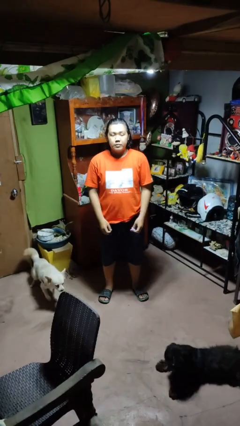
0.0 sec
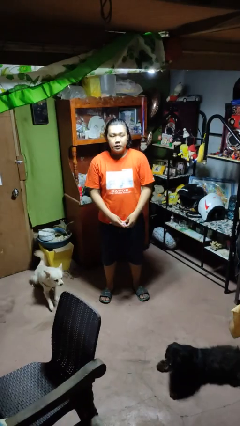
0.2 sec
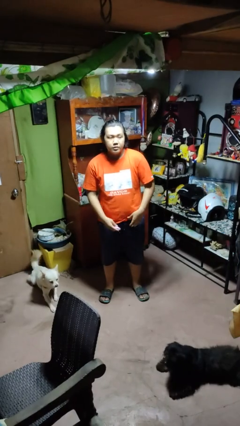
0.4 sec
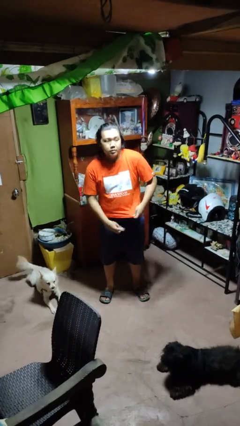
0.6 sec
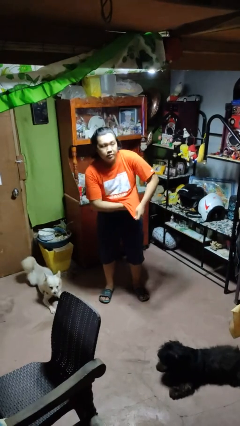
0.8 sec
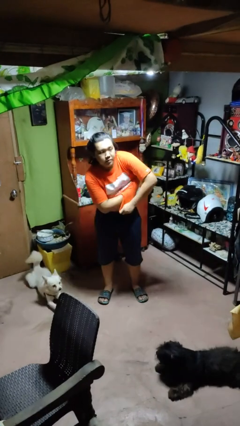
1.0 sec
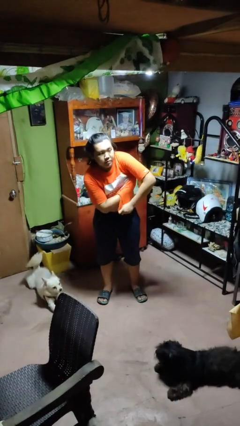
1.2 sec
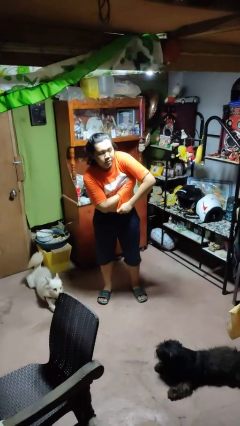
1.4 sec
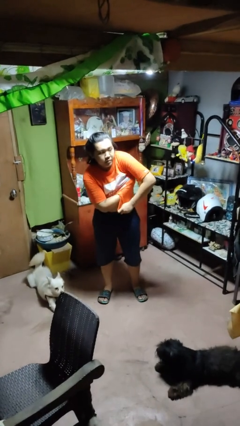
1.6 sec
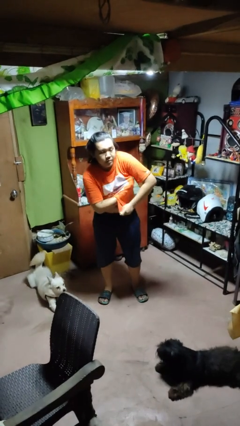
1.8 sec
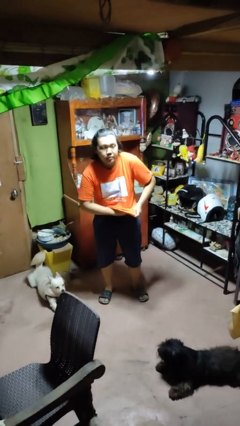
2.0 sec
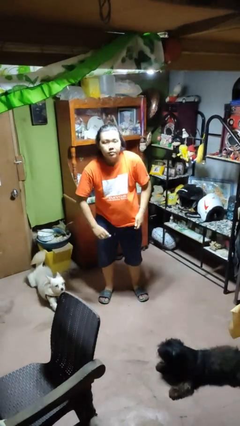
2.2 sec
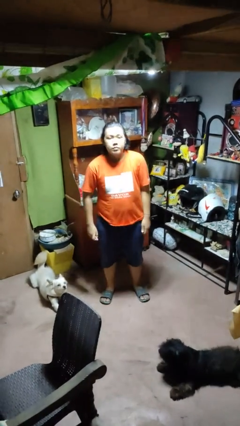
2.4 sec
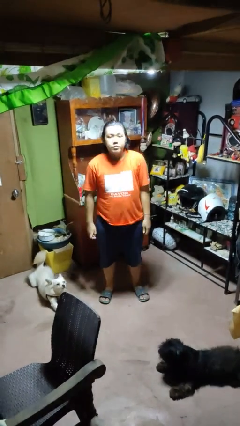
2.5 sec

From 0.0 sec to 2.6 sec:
person applies deodorant

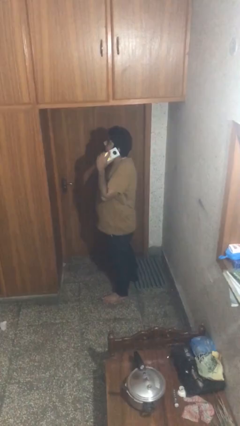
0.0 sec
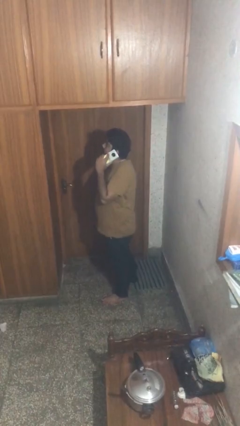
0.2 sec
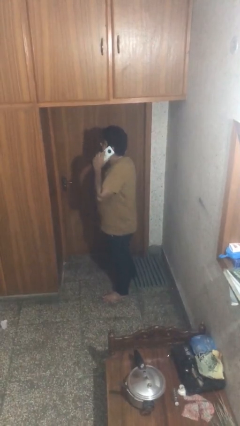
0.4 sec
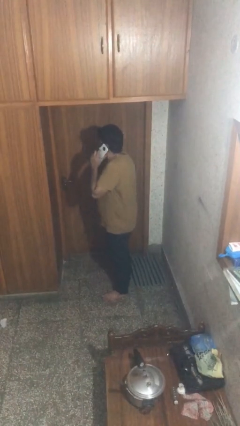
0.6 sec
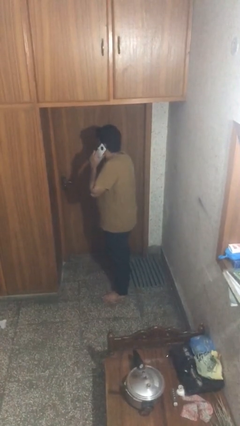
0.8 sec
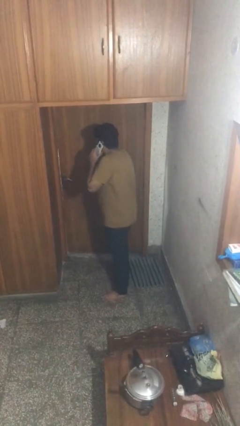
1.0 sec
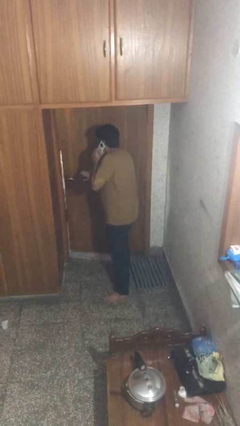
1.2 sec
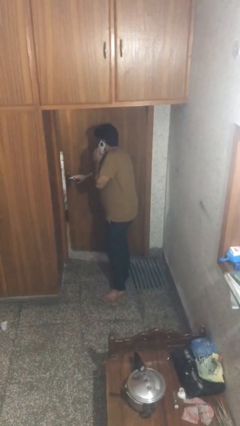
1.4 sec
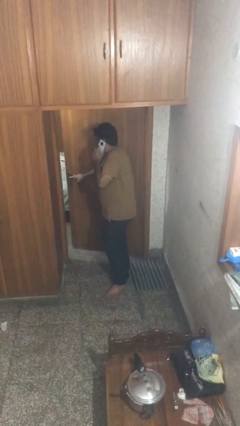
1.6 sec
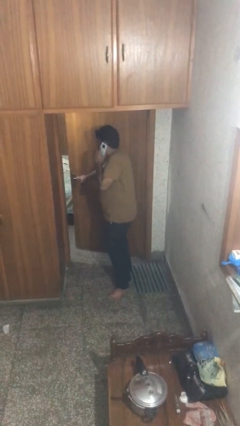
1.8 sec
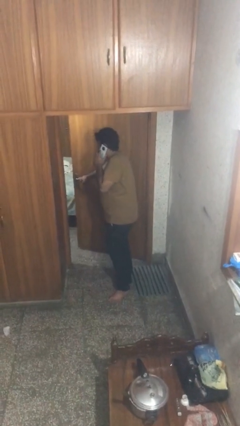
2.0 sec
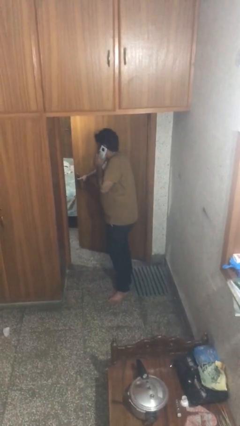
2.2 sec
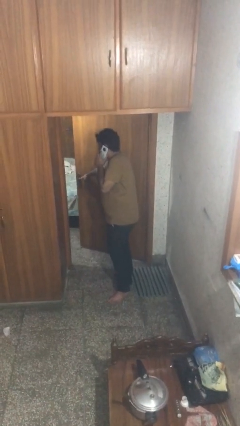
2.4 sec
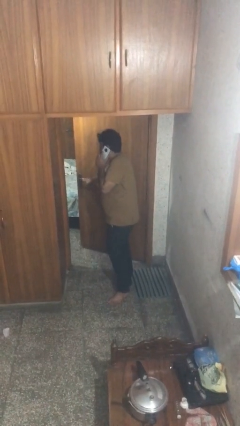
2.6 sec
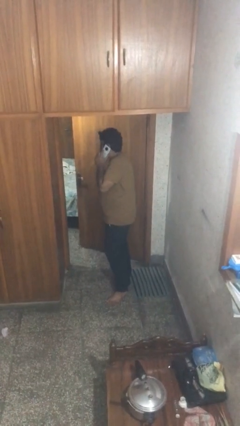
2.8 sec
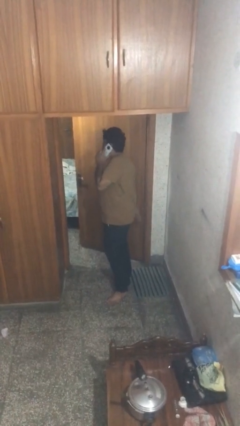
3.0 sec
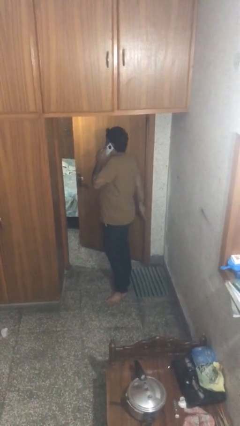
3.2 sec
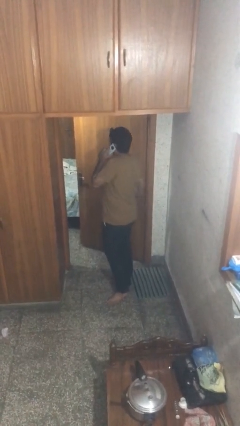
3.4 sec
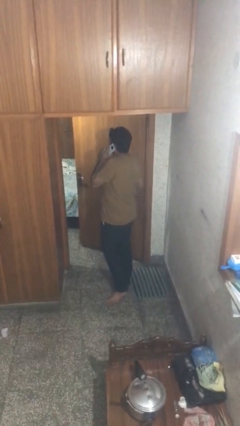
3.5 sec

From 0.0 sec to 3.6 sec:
person opens facility door

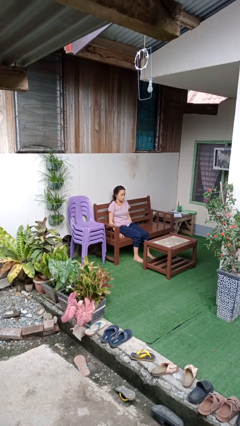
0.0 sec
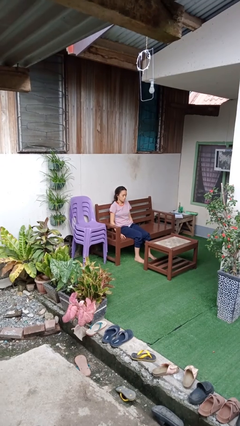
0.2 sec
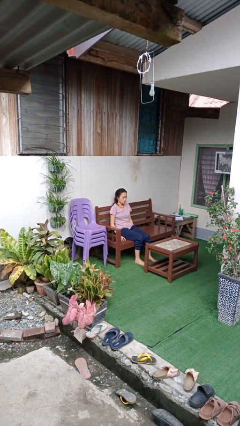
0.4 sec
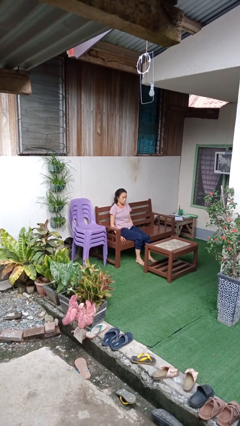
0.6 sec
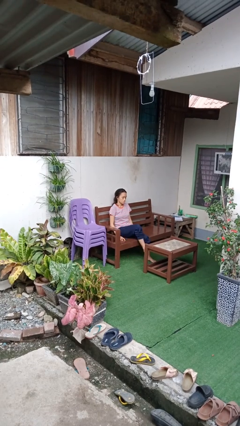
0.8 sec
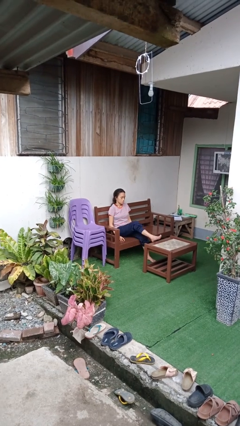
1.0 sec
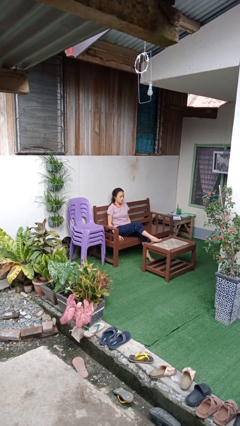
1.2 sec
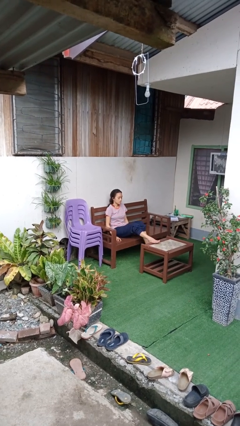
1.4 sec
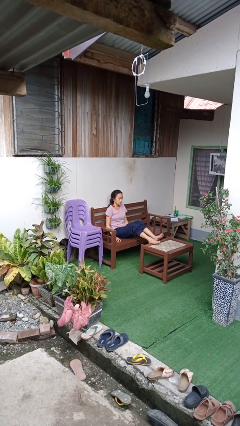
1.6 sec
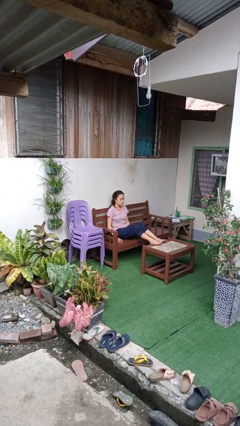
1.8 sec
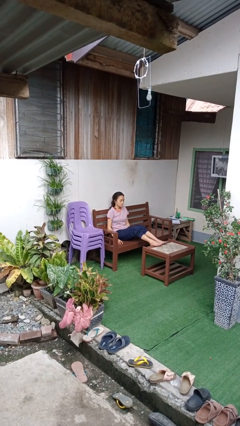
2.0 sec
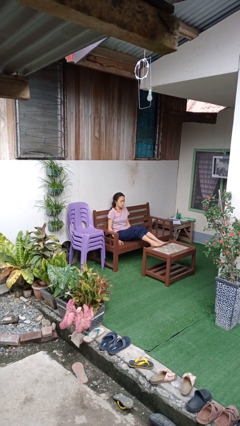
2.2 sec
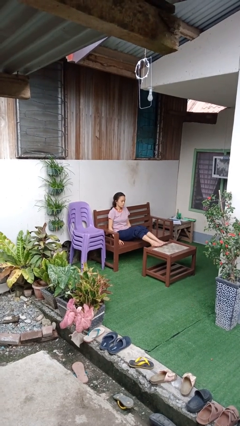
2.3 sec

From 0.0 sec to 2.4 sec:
person puts feet up

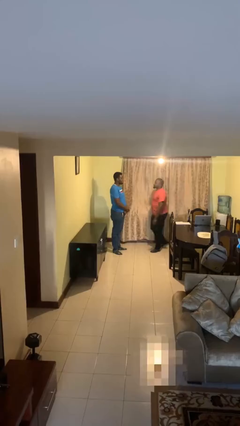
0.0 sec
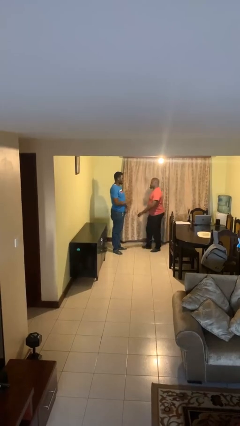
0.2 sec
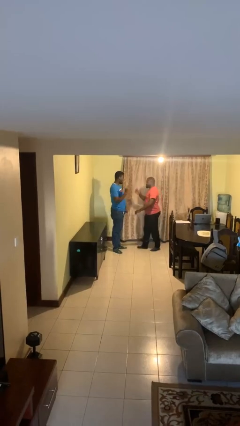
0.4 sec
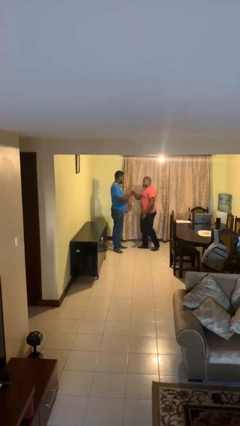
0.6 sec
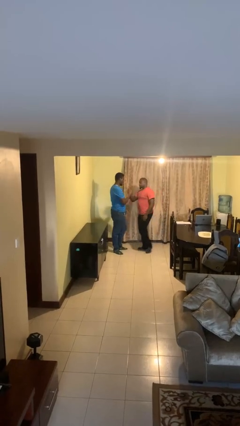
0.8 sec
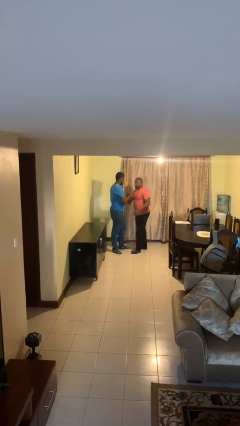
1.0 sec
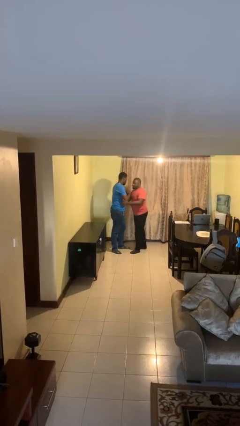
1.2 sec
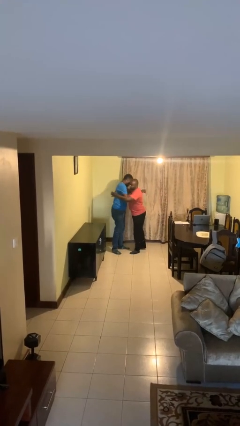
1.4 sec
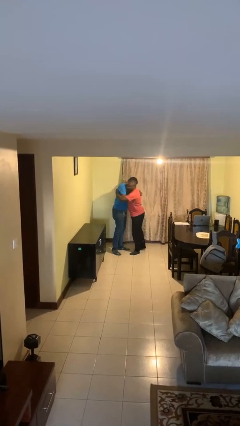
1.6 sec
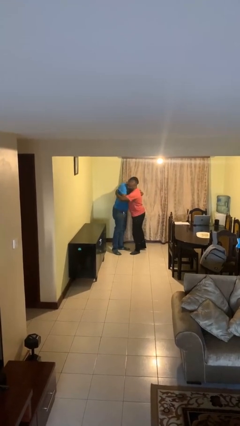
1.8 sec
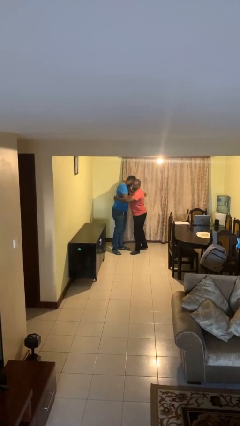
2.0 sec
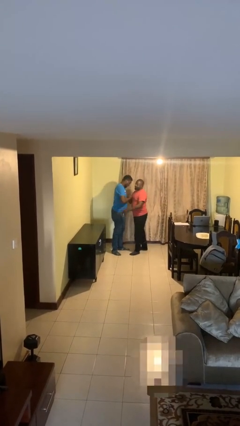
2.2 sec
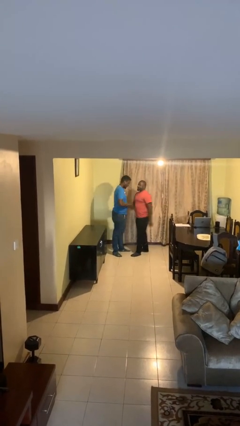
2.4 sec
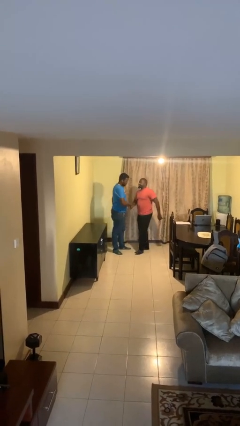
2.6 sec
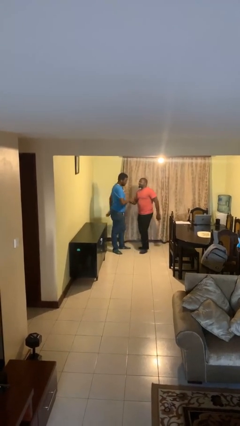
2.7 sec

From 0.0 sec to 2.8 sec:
person embraces person

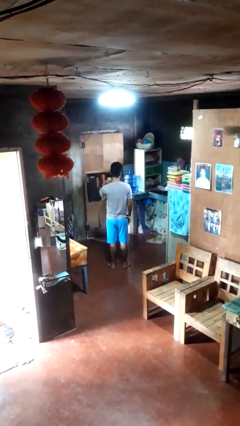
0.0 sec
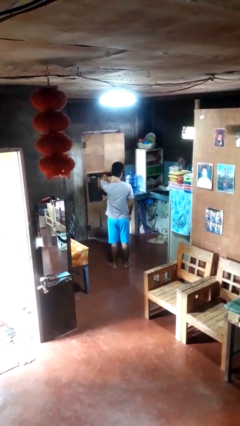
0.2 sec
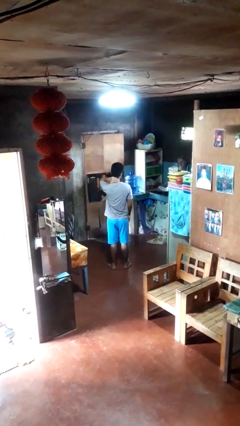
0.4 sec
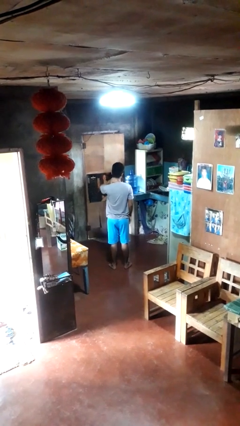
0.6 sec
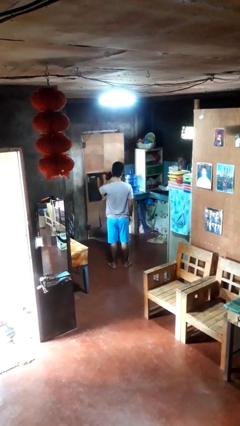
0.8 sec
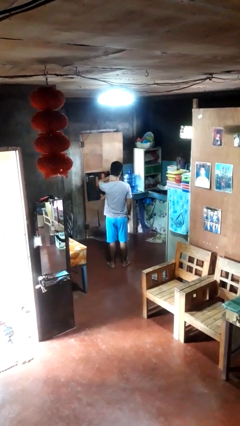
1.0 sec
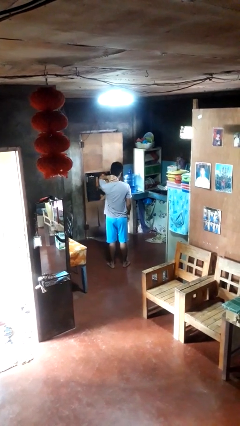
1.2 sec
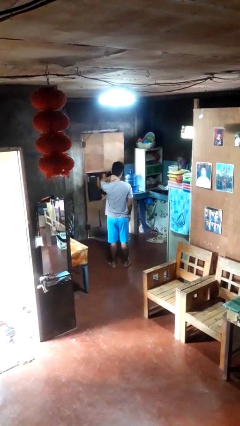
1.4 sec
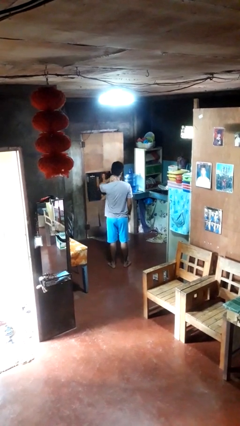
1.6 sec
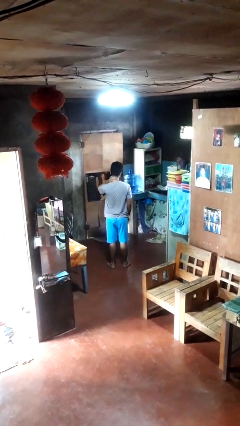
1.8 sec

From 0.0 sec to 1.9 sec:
person rubs neck

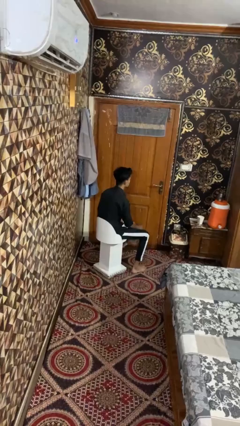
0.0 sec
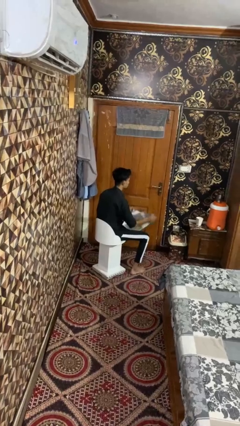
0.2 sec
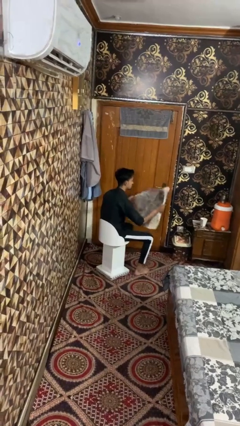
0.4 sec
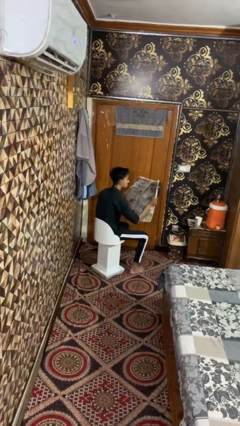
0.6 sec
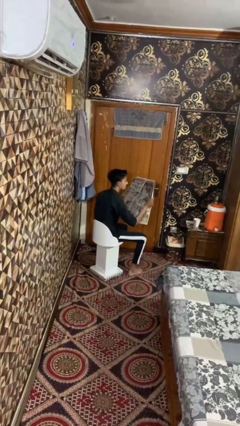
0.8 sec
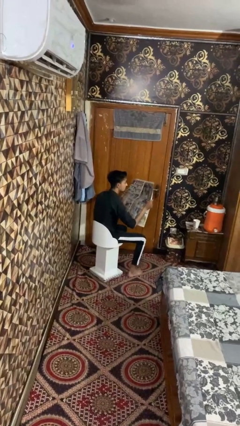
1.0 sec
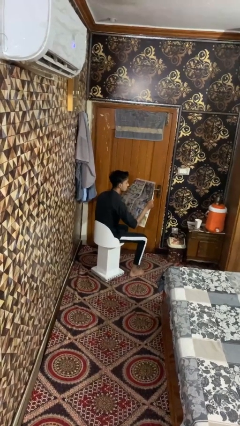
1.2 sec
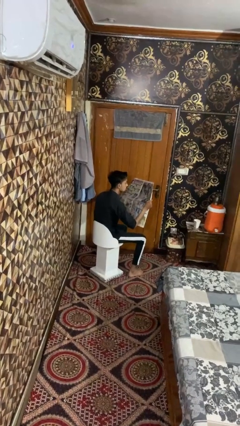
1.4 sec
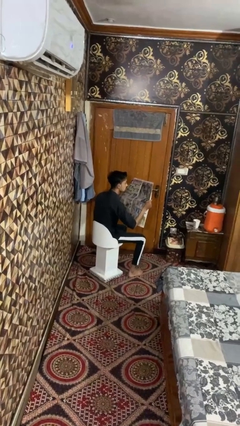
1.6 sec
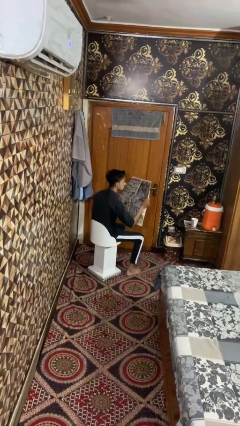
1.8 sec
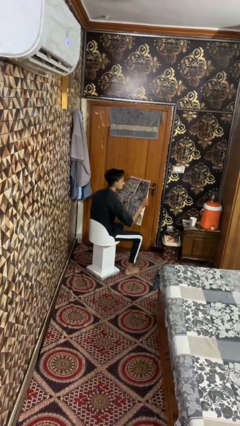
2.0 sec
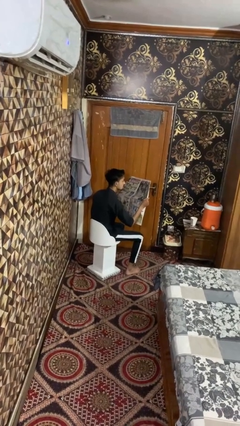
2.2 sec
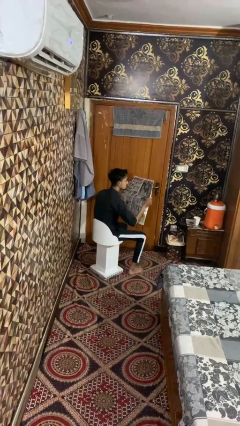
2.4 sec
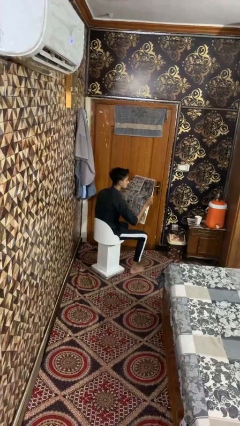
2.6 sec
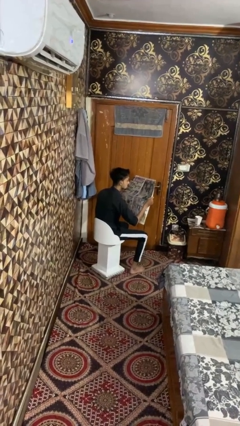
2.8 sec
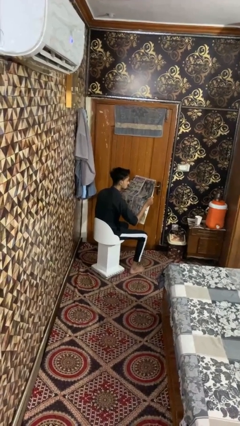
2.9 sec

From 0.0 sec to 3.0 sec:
person reads magazine

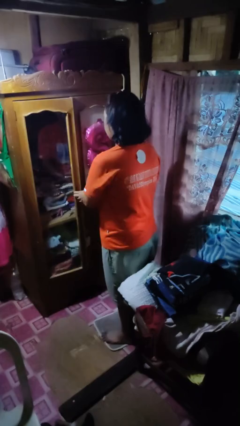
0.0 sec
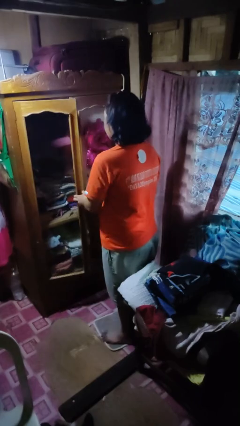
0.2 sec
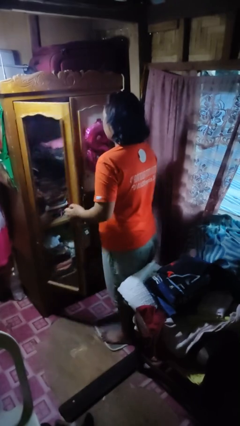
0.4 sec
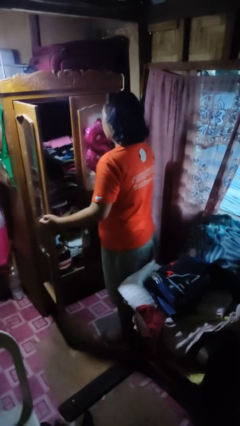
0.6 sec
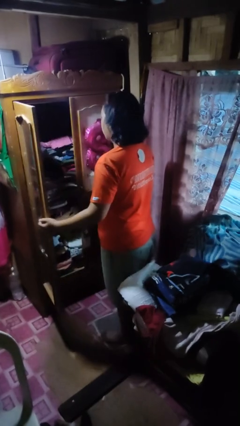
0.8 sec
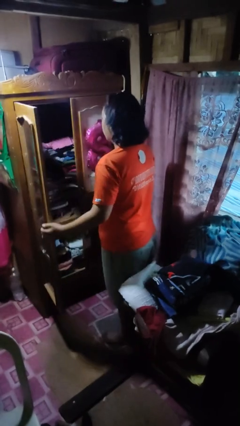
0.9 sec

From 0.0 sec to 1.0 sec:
person opens closet door

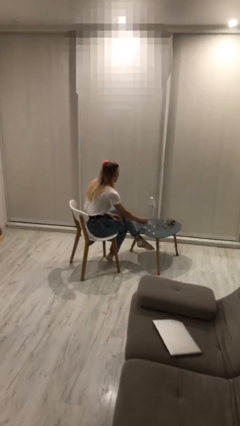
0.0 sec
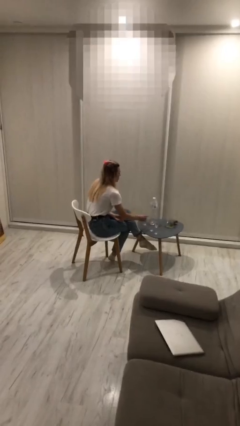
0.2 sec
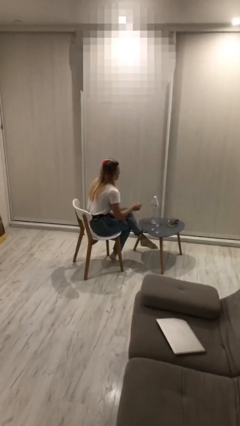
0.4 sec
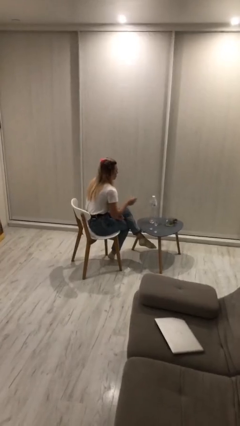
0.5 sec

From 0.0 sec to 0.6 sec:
person picks up object from table
